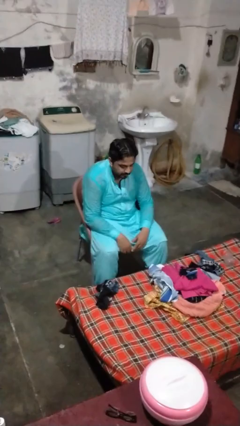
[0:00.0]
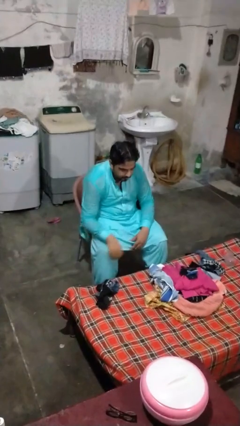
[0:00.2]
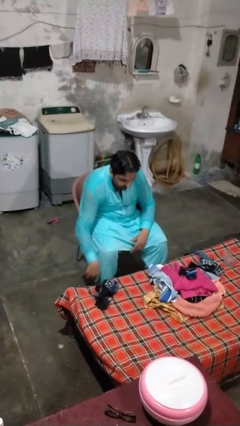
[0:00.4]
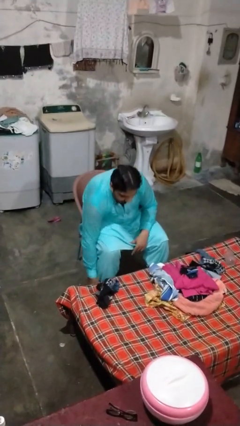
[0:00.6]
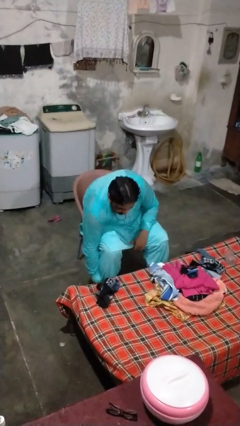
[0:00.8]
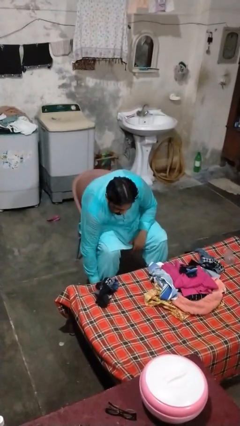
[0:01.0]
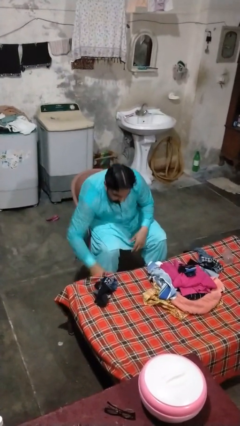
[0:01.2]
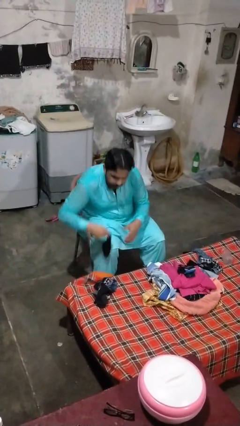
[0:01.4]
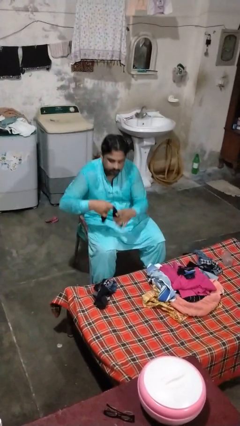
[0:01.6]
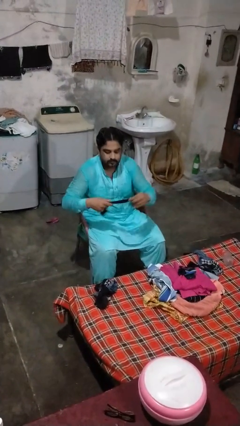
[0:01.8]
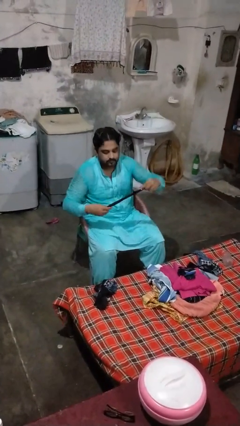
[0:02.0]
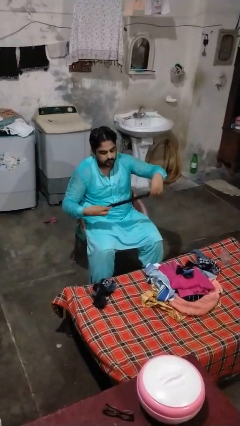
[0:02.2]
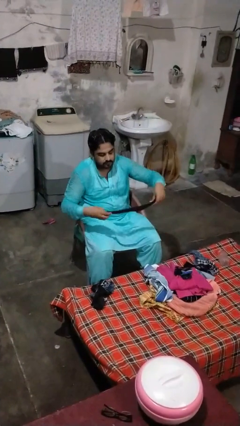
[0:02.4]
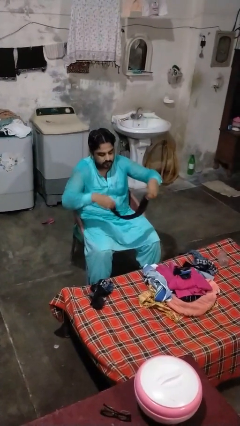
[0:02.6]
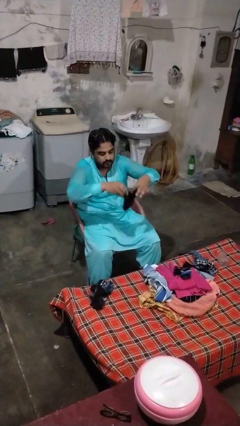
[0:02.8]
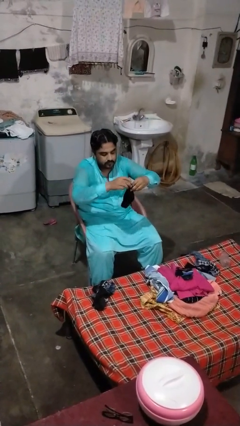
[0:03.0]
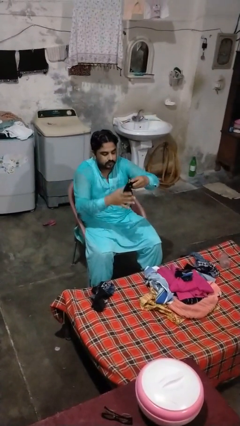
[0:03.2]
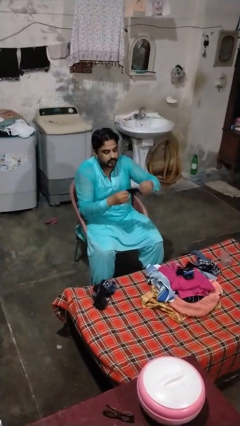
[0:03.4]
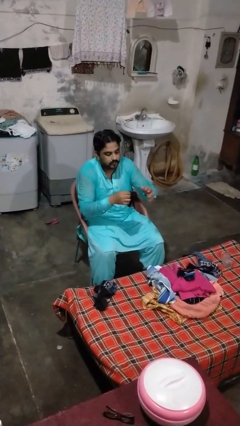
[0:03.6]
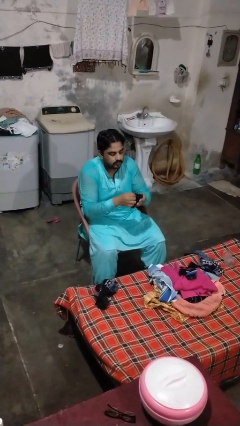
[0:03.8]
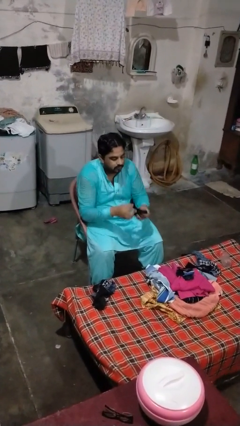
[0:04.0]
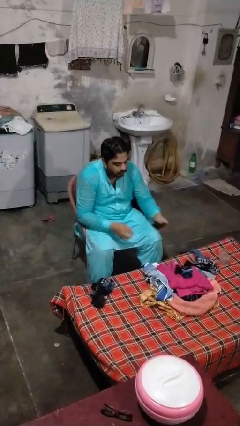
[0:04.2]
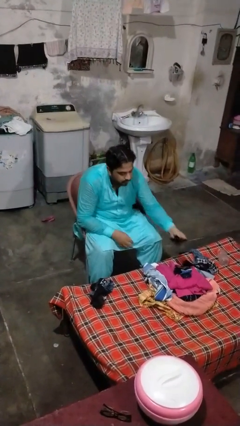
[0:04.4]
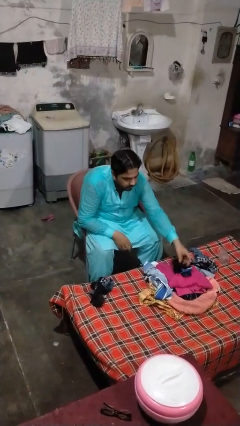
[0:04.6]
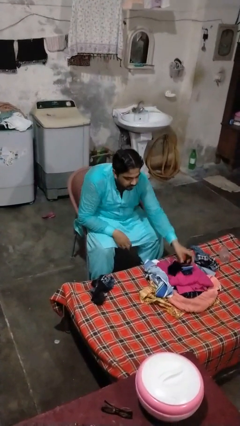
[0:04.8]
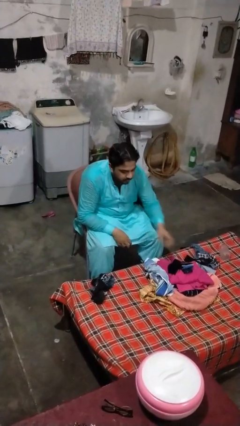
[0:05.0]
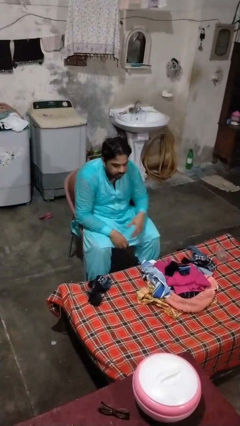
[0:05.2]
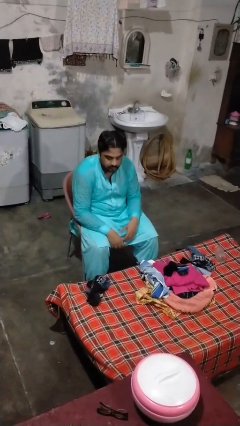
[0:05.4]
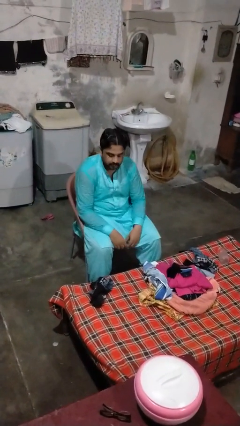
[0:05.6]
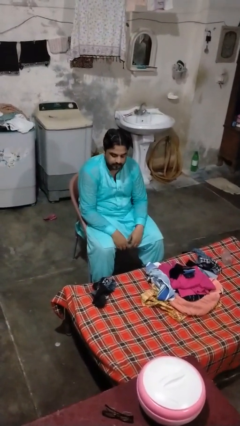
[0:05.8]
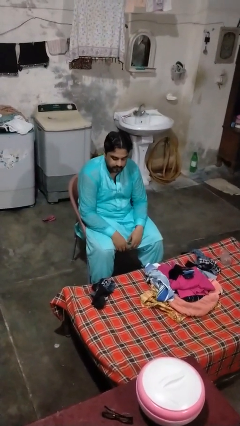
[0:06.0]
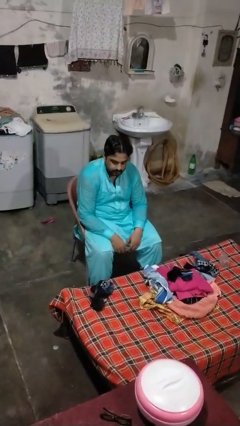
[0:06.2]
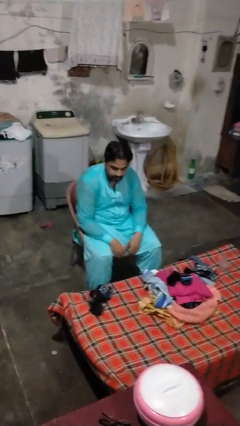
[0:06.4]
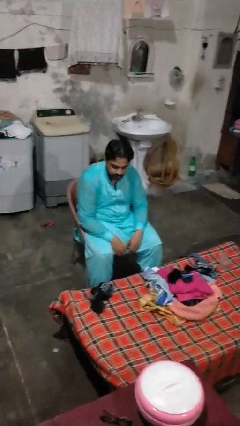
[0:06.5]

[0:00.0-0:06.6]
person folds socks

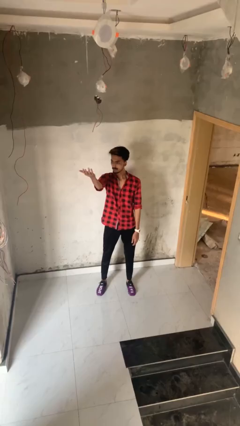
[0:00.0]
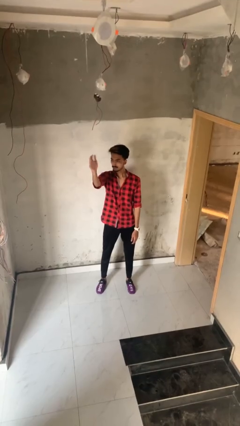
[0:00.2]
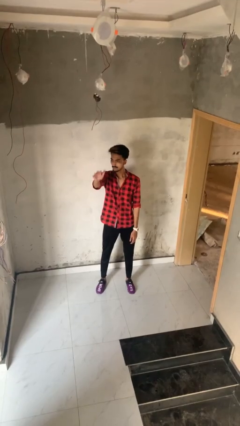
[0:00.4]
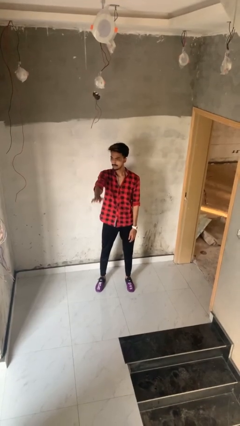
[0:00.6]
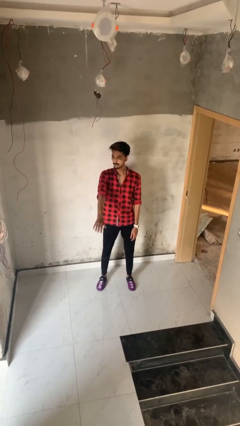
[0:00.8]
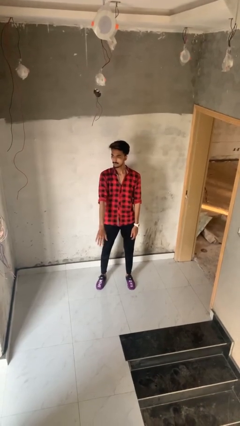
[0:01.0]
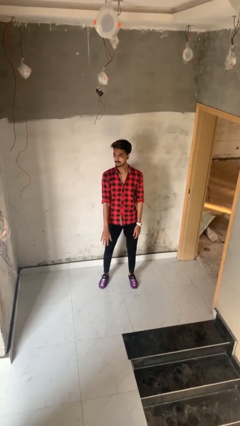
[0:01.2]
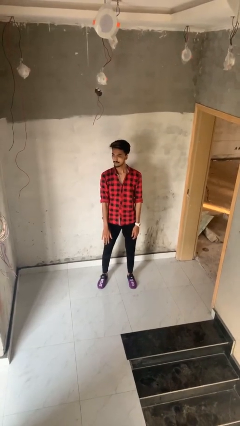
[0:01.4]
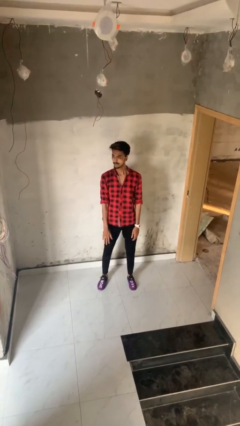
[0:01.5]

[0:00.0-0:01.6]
person gestures swipe down

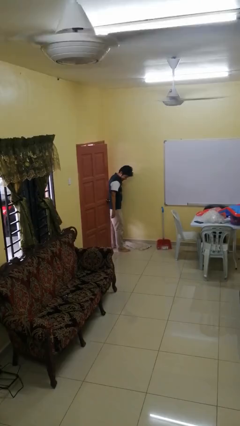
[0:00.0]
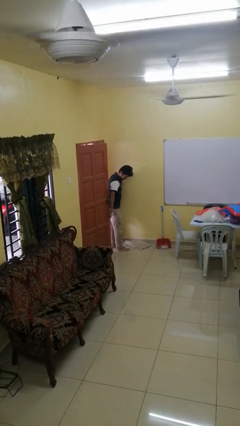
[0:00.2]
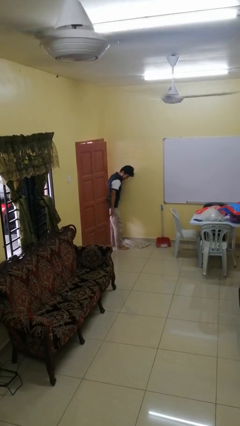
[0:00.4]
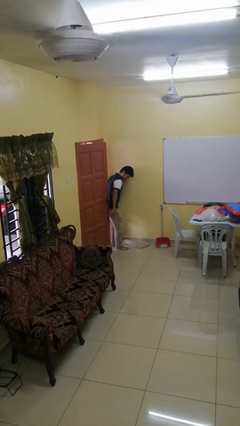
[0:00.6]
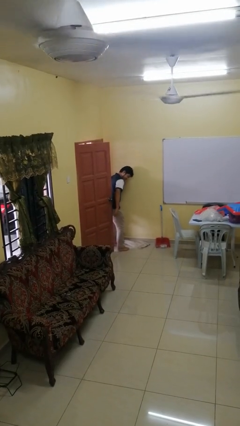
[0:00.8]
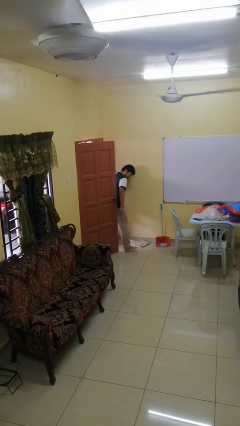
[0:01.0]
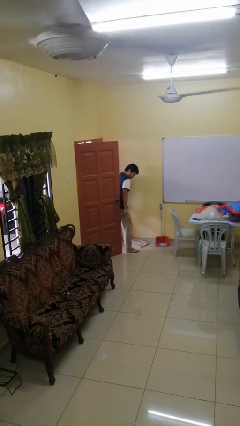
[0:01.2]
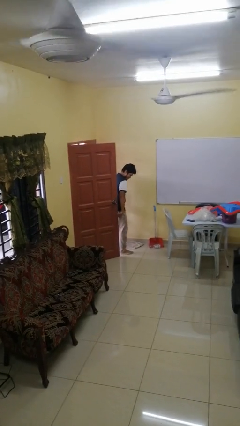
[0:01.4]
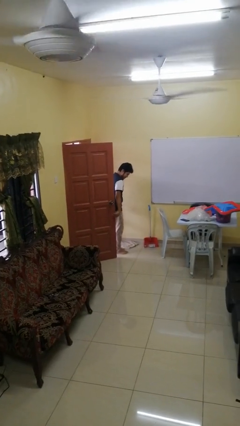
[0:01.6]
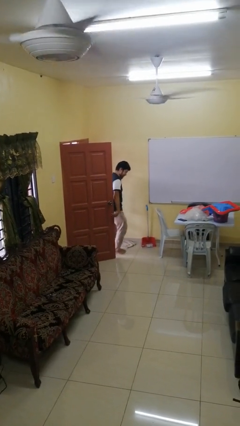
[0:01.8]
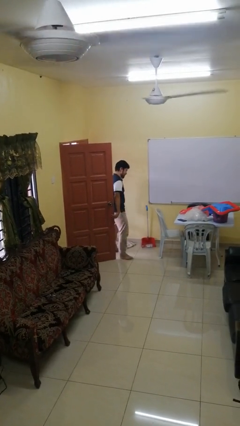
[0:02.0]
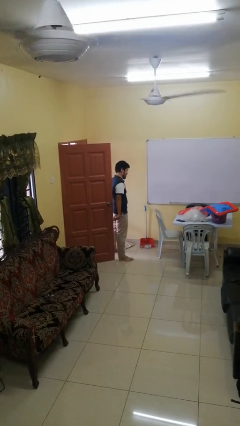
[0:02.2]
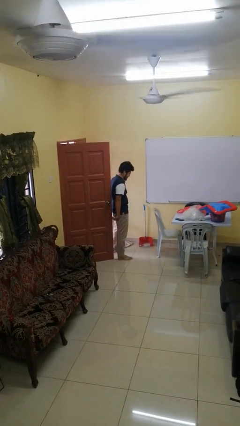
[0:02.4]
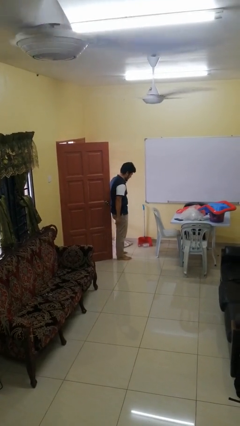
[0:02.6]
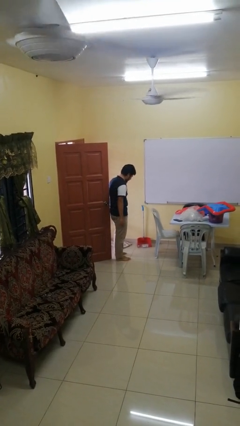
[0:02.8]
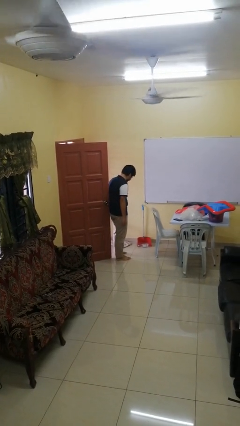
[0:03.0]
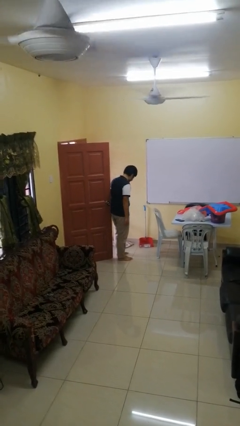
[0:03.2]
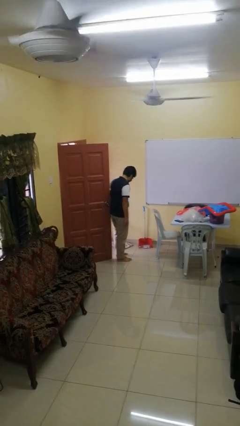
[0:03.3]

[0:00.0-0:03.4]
person opens facility door

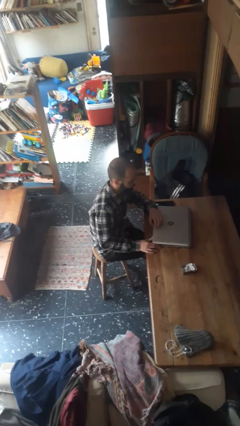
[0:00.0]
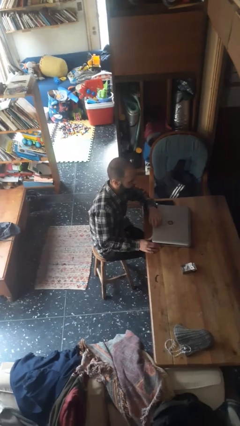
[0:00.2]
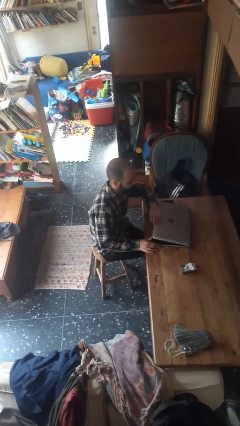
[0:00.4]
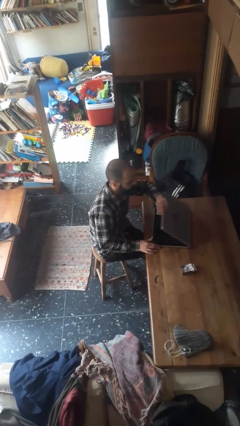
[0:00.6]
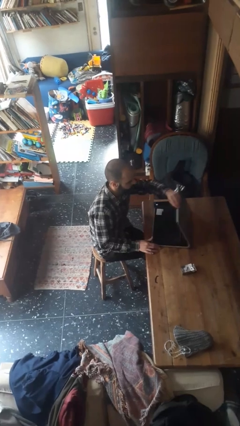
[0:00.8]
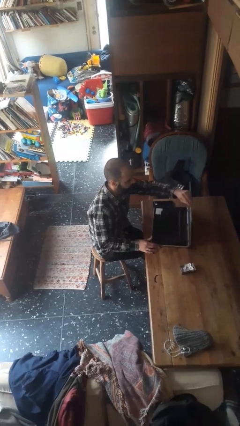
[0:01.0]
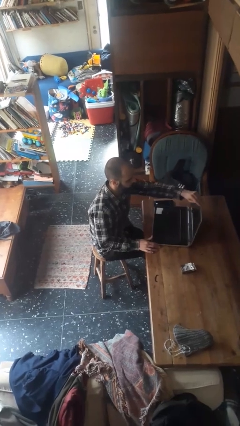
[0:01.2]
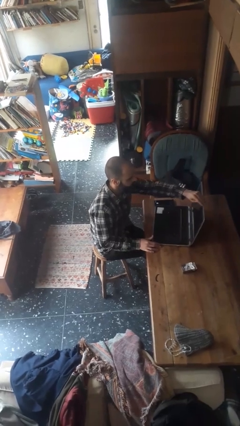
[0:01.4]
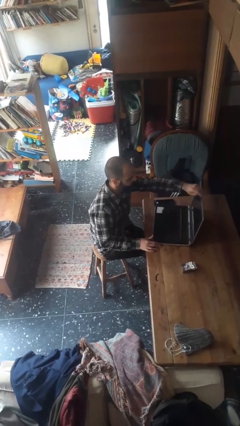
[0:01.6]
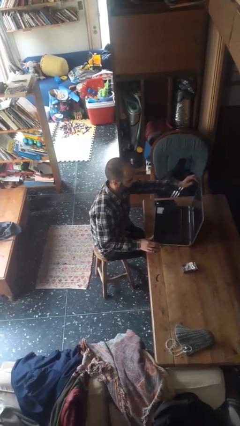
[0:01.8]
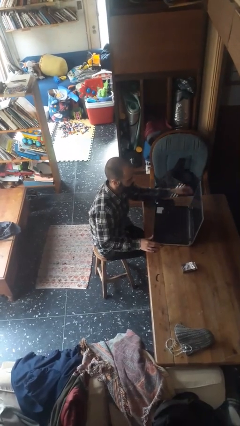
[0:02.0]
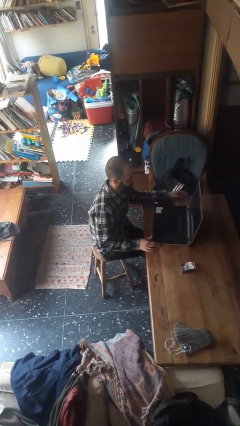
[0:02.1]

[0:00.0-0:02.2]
person opens laptop

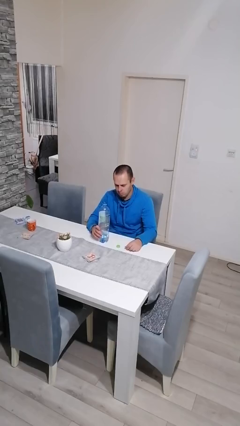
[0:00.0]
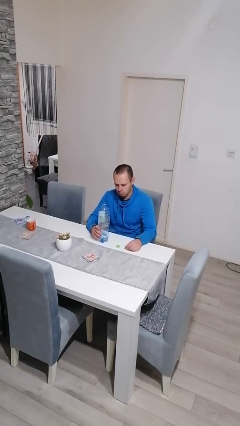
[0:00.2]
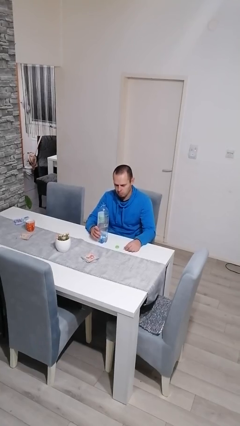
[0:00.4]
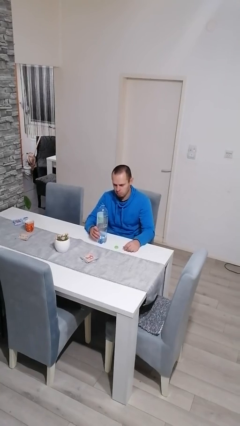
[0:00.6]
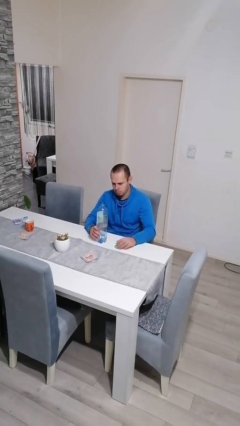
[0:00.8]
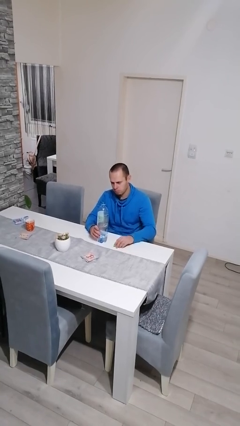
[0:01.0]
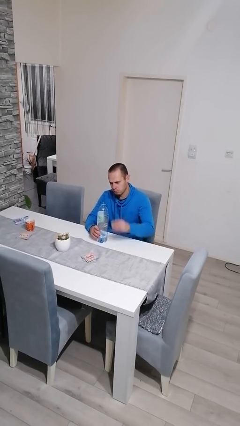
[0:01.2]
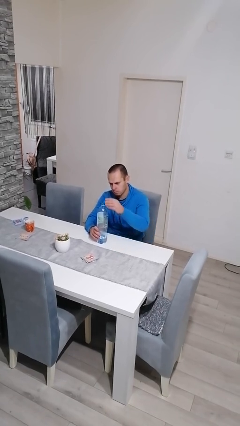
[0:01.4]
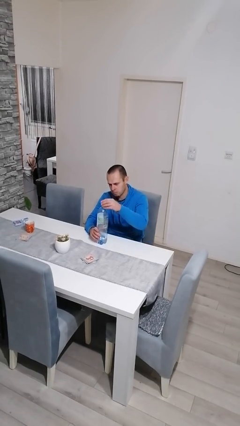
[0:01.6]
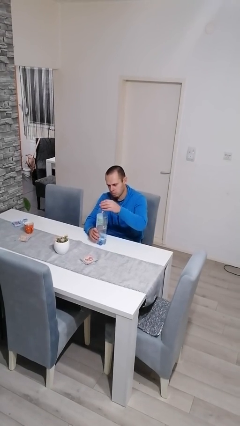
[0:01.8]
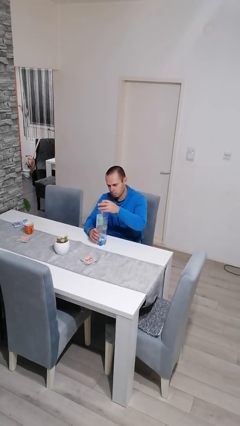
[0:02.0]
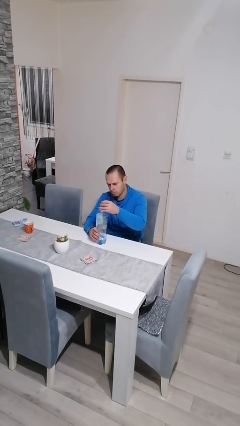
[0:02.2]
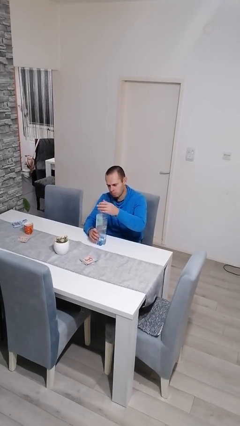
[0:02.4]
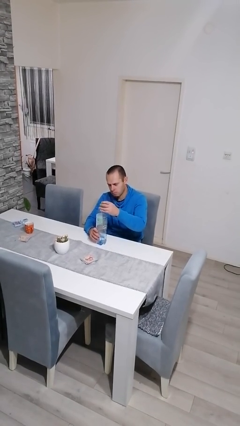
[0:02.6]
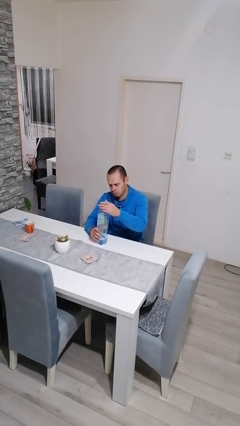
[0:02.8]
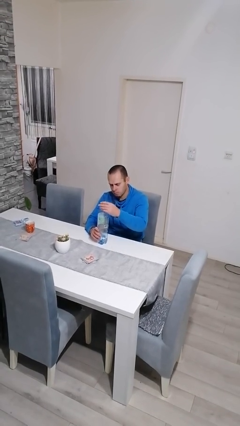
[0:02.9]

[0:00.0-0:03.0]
person screws lid to bottle

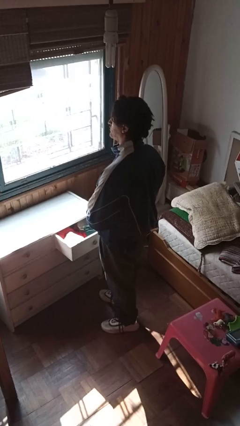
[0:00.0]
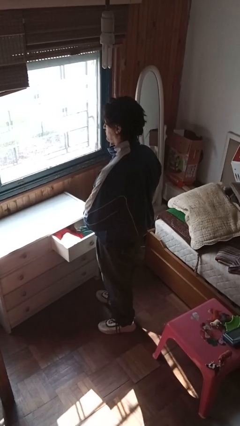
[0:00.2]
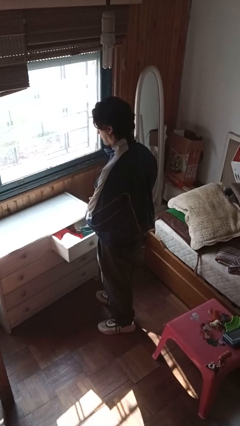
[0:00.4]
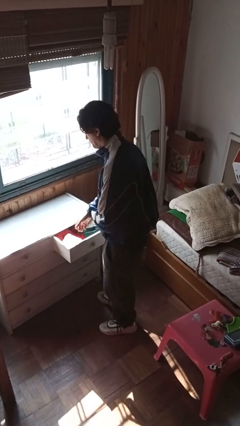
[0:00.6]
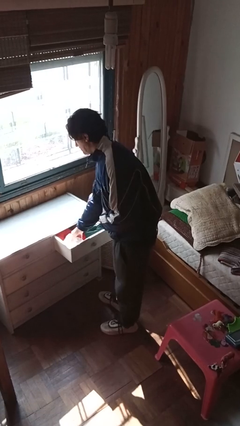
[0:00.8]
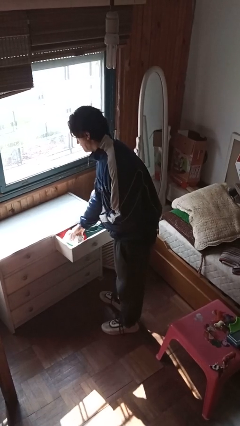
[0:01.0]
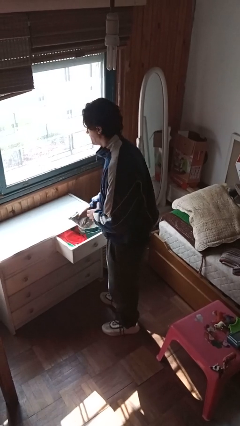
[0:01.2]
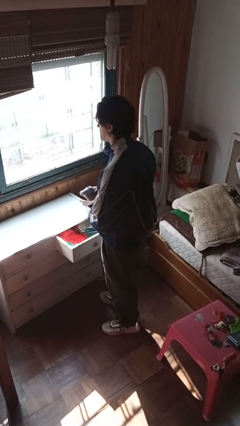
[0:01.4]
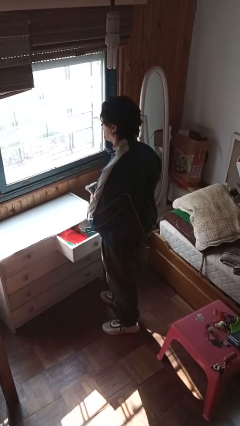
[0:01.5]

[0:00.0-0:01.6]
person takes clothes from dresser
